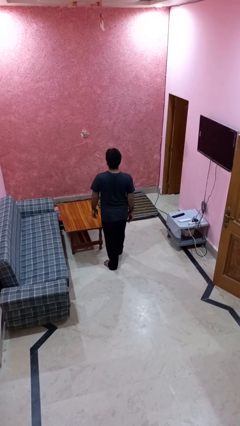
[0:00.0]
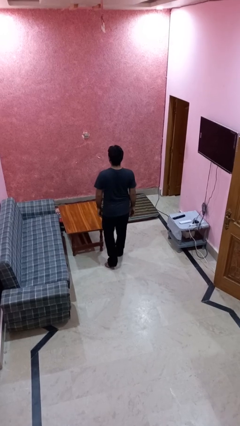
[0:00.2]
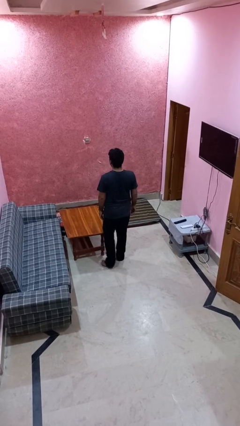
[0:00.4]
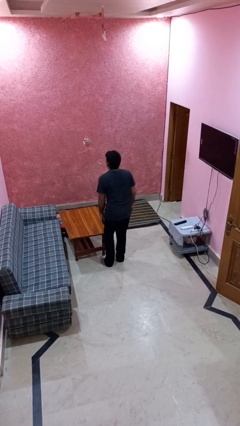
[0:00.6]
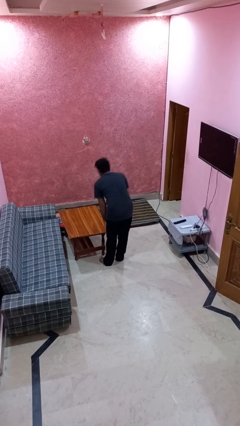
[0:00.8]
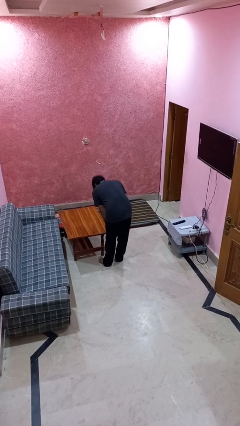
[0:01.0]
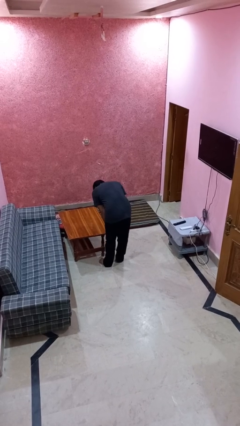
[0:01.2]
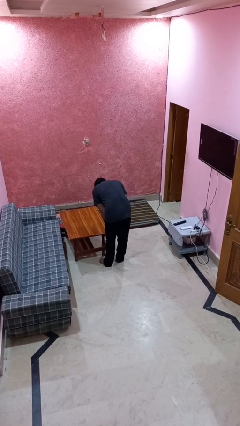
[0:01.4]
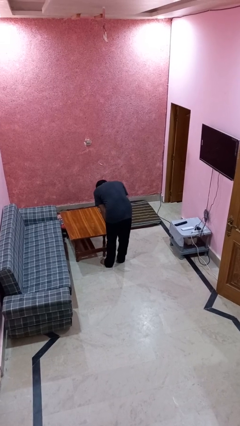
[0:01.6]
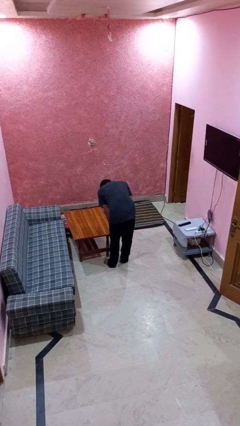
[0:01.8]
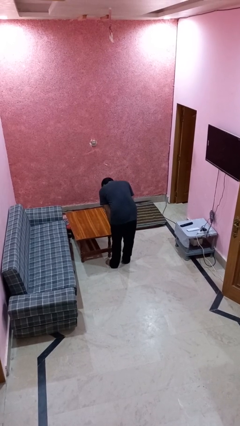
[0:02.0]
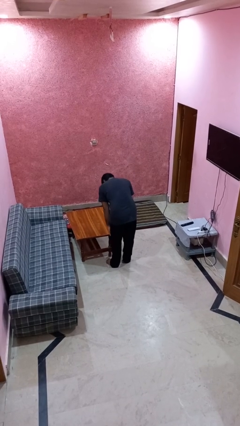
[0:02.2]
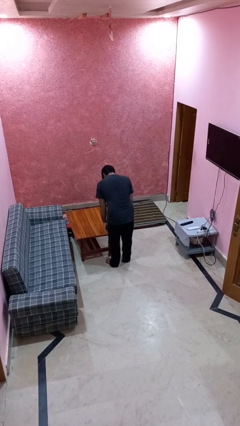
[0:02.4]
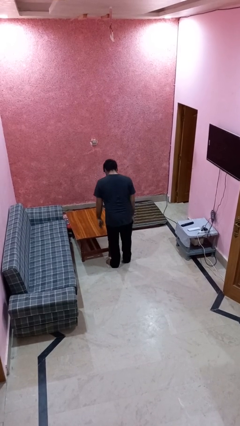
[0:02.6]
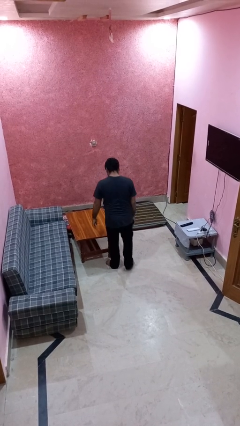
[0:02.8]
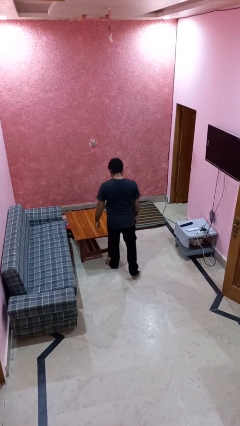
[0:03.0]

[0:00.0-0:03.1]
person bumps into table

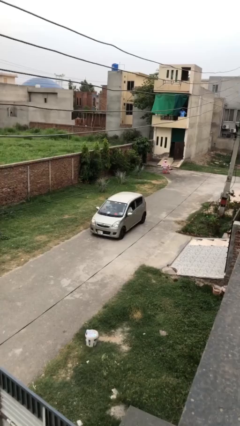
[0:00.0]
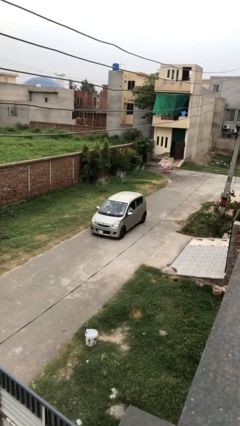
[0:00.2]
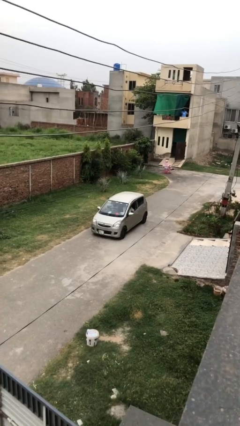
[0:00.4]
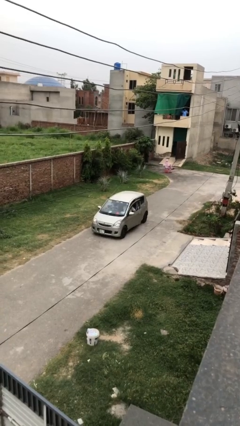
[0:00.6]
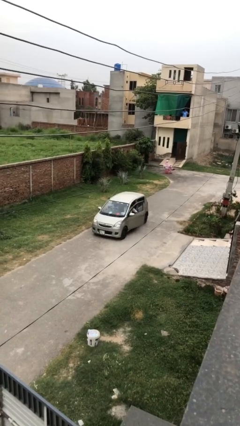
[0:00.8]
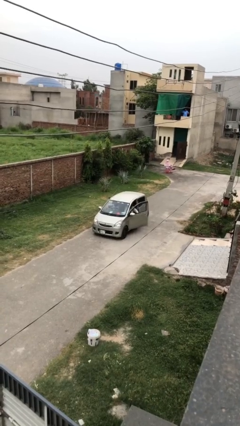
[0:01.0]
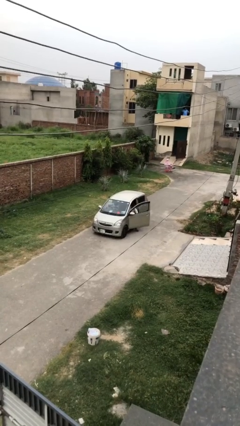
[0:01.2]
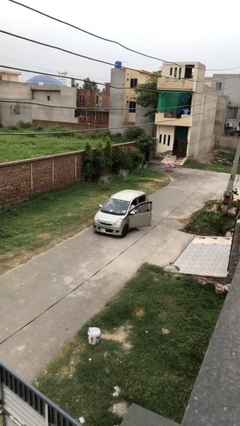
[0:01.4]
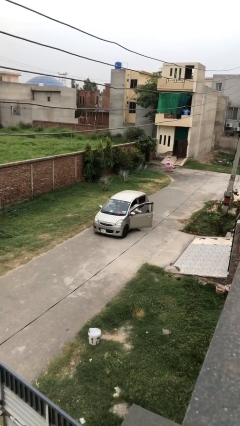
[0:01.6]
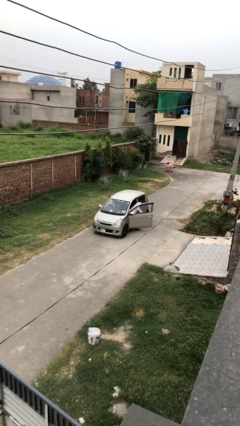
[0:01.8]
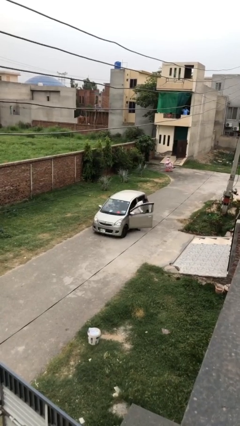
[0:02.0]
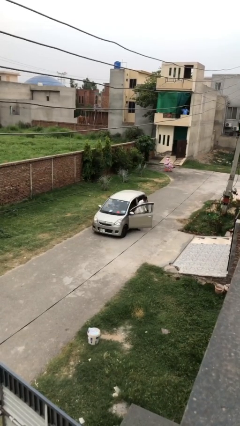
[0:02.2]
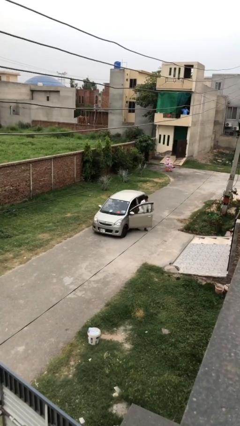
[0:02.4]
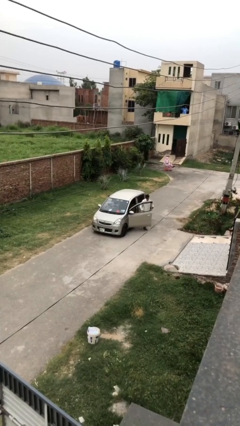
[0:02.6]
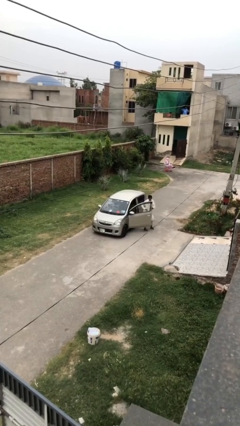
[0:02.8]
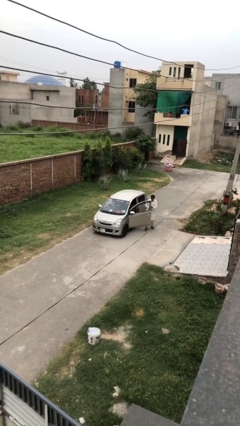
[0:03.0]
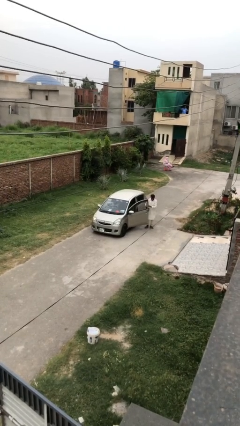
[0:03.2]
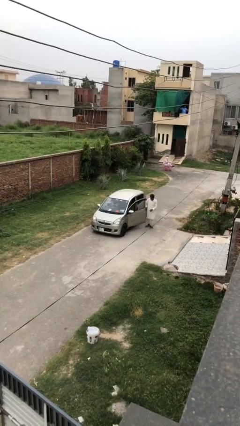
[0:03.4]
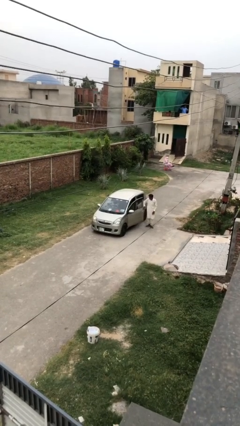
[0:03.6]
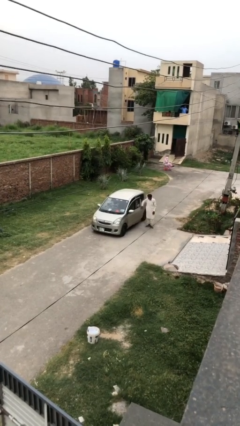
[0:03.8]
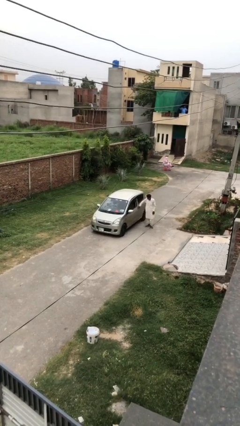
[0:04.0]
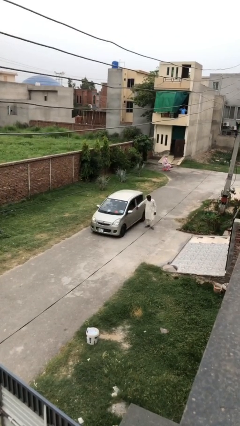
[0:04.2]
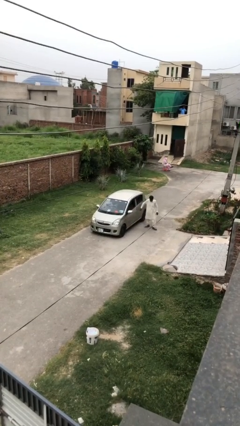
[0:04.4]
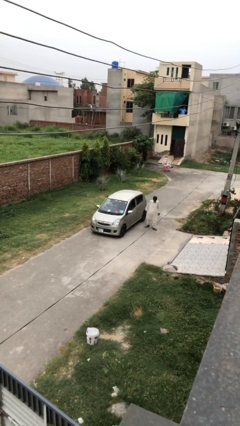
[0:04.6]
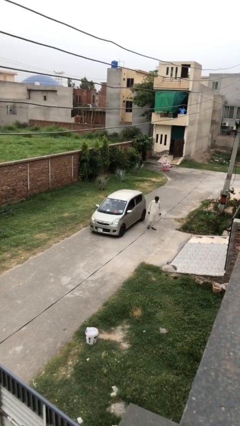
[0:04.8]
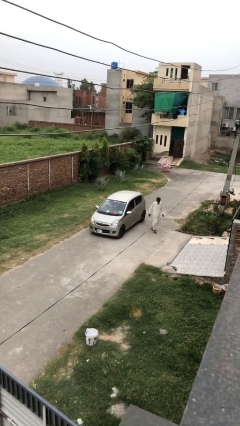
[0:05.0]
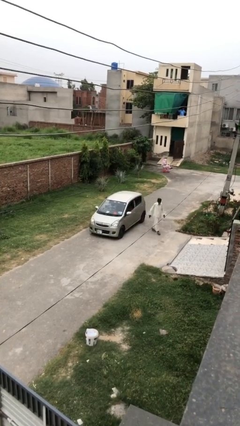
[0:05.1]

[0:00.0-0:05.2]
car drops off person

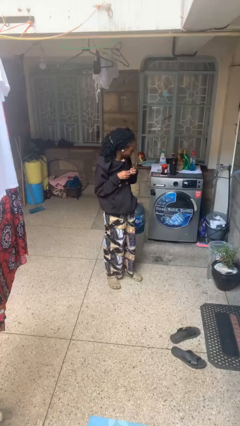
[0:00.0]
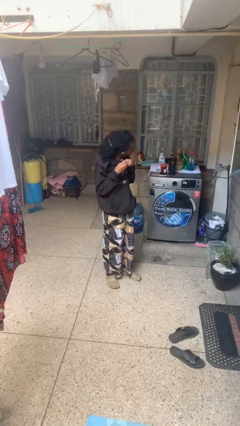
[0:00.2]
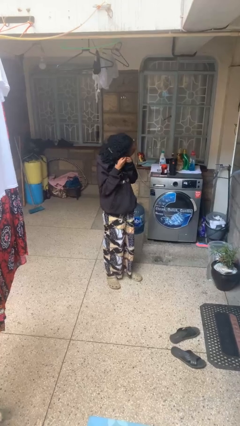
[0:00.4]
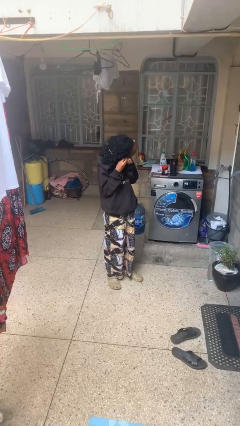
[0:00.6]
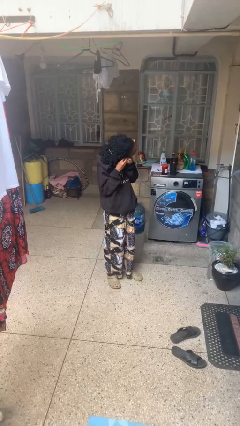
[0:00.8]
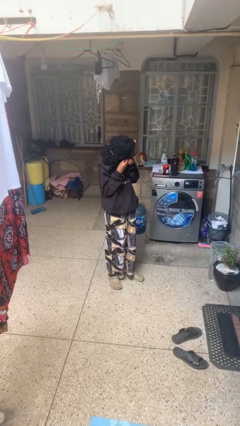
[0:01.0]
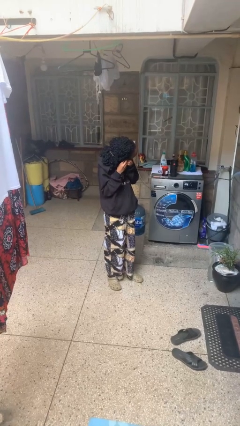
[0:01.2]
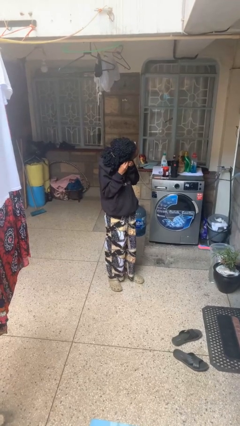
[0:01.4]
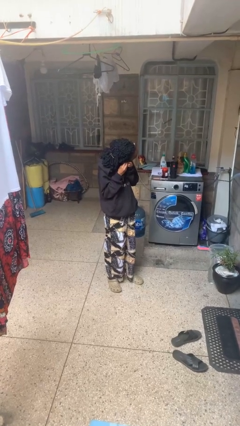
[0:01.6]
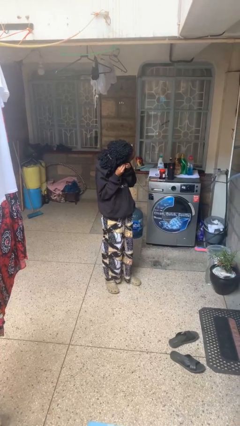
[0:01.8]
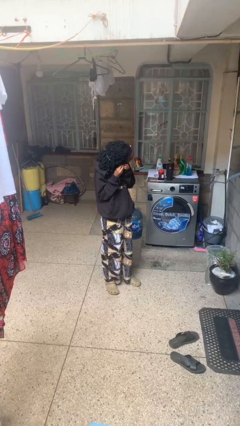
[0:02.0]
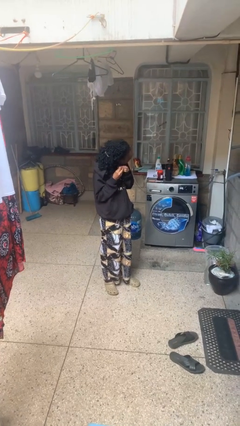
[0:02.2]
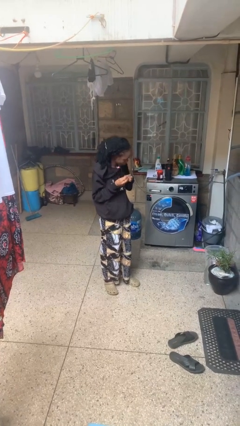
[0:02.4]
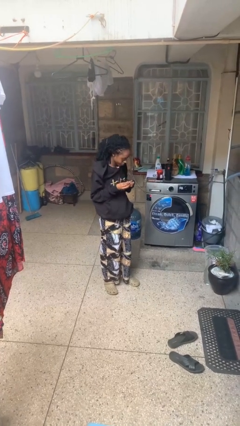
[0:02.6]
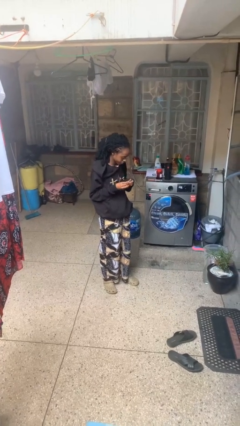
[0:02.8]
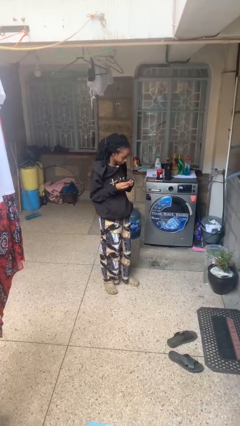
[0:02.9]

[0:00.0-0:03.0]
person takes off earrings

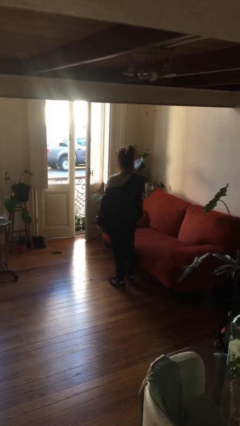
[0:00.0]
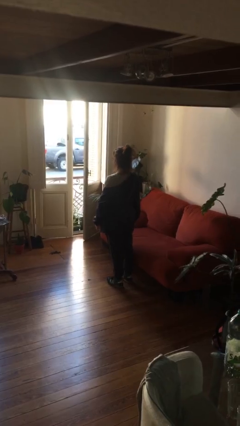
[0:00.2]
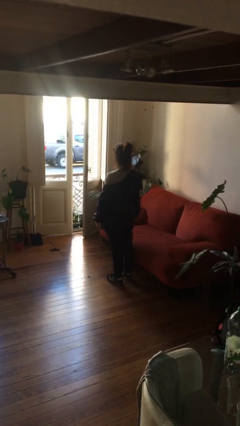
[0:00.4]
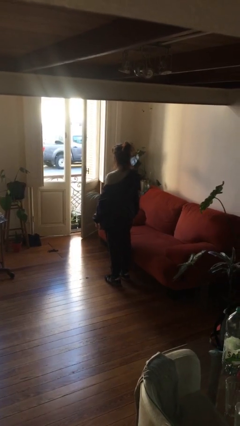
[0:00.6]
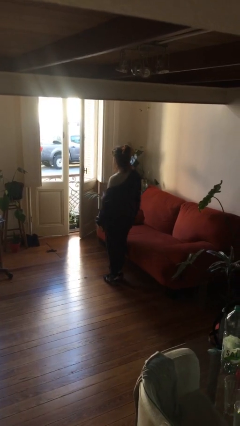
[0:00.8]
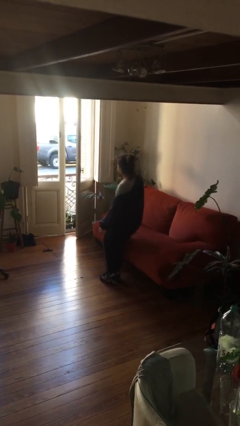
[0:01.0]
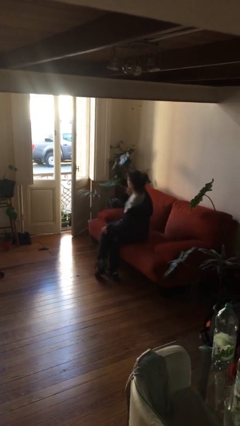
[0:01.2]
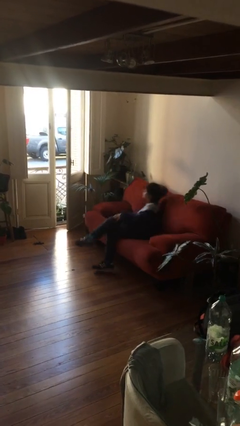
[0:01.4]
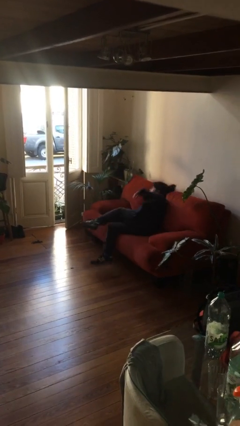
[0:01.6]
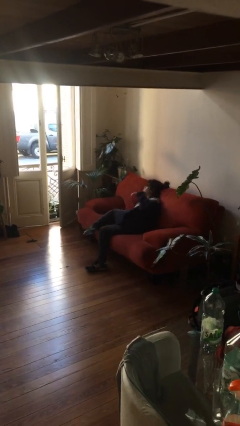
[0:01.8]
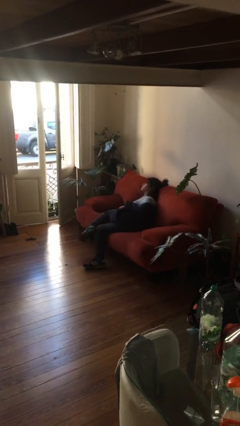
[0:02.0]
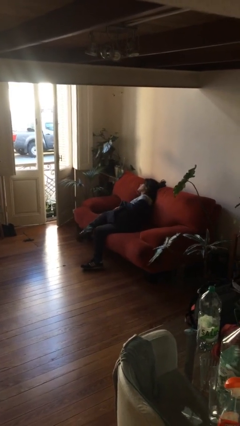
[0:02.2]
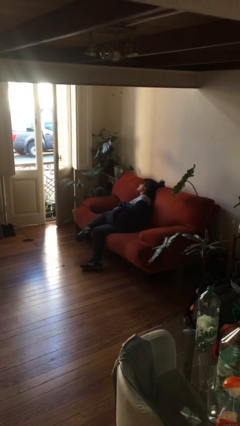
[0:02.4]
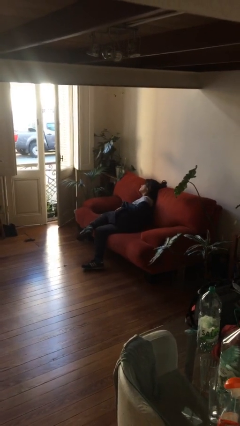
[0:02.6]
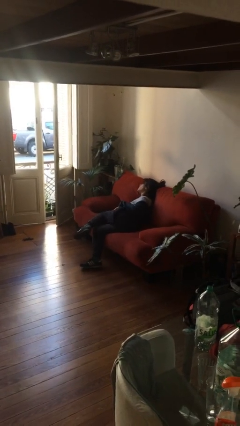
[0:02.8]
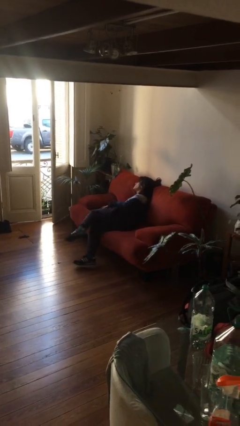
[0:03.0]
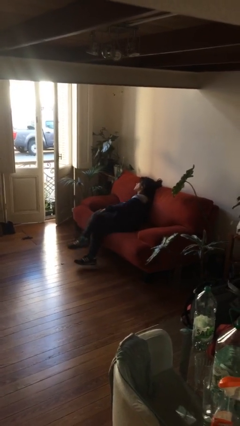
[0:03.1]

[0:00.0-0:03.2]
person lies down on couch

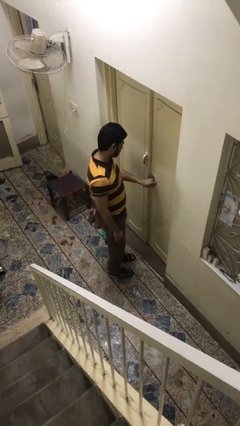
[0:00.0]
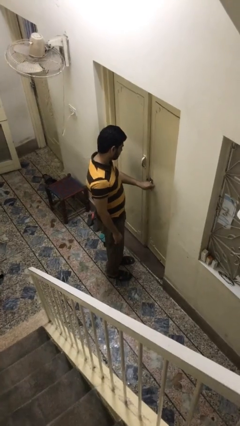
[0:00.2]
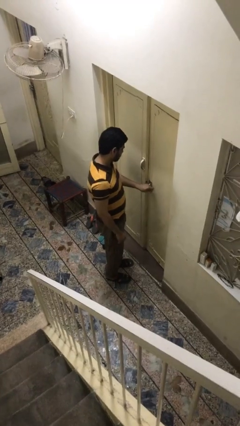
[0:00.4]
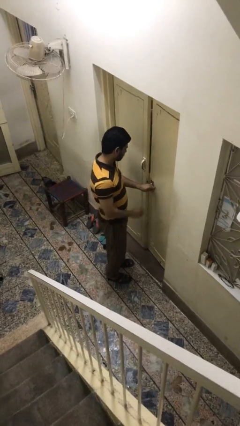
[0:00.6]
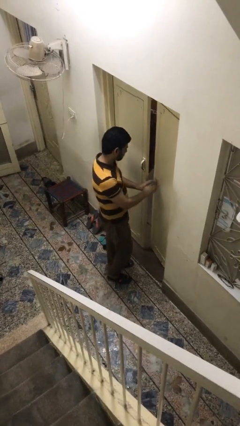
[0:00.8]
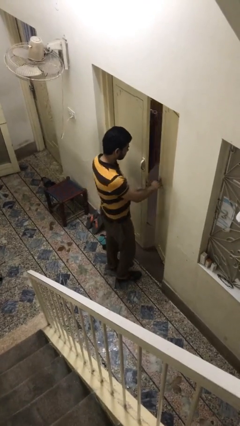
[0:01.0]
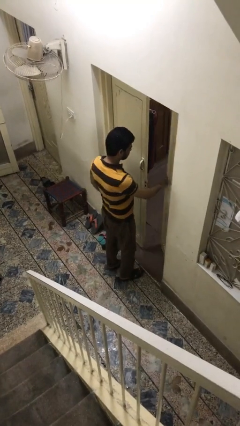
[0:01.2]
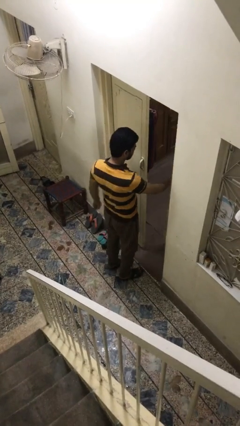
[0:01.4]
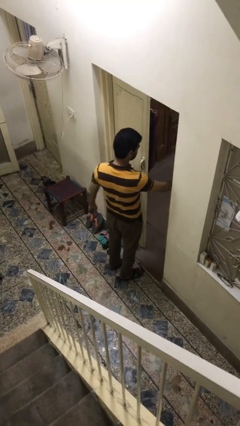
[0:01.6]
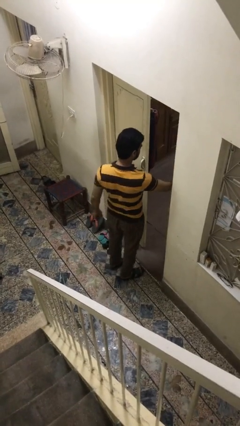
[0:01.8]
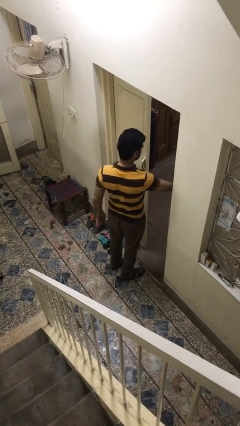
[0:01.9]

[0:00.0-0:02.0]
person opens facility door

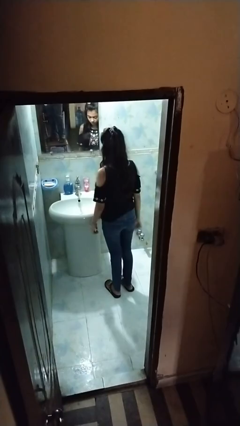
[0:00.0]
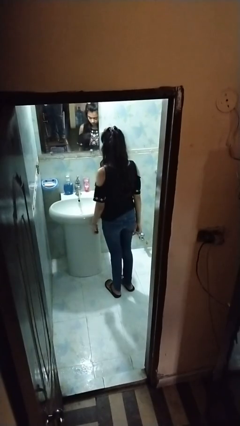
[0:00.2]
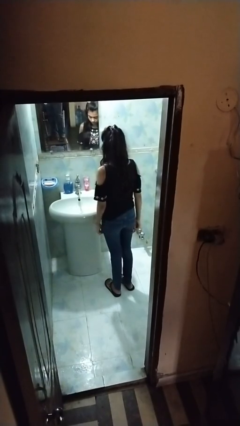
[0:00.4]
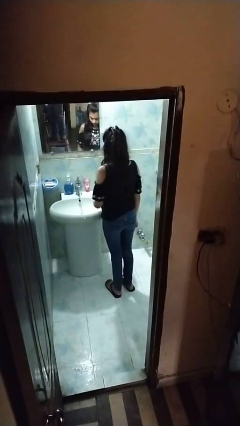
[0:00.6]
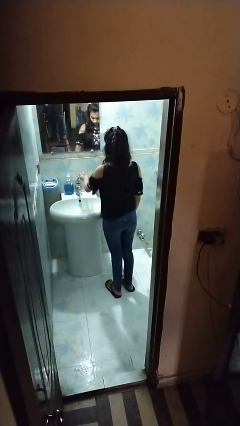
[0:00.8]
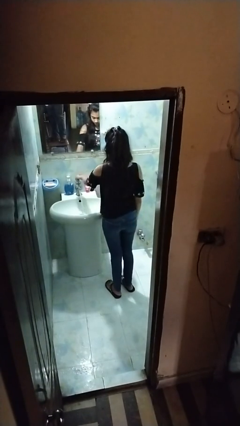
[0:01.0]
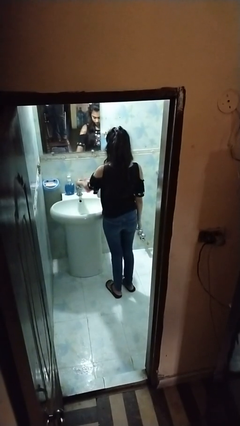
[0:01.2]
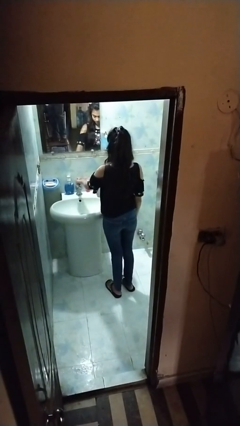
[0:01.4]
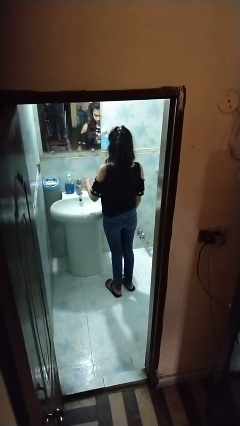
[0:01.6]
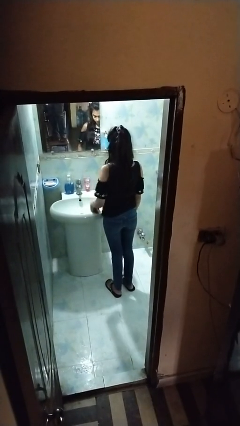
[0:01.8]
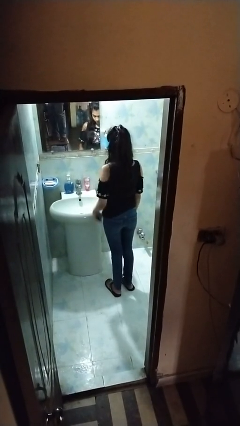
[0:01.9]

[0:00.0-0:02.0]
person turns off faucet
